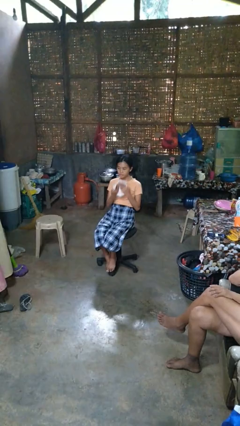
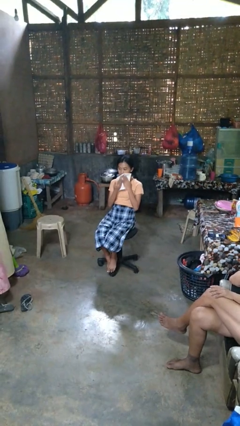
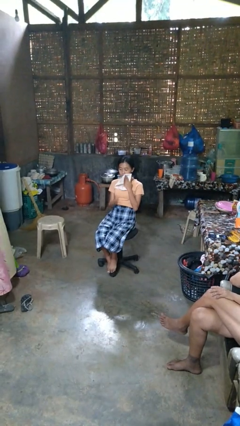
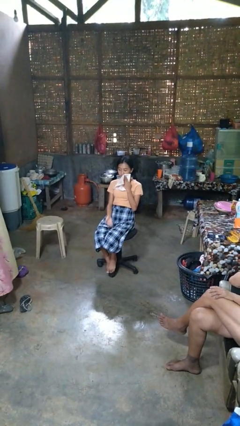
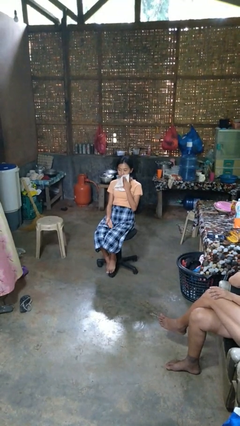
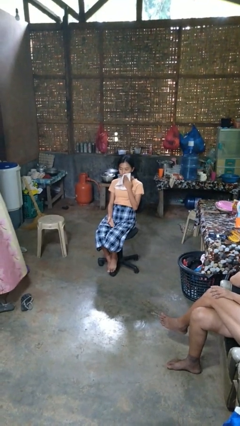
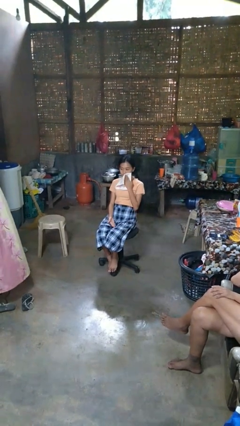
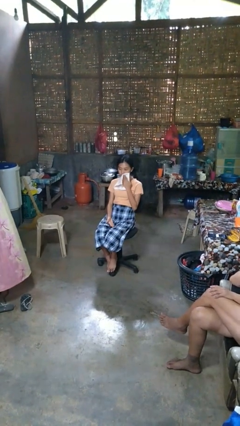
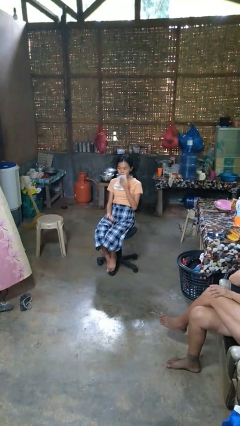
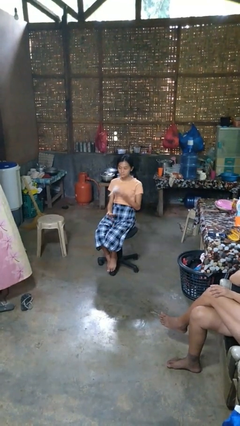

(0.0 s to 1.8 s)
person wipes mouth with napkin

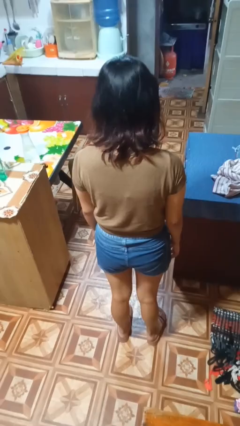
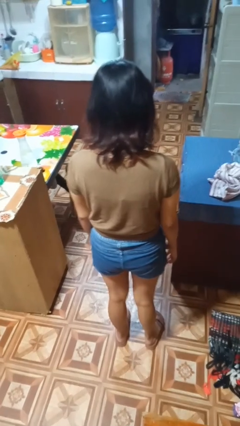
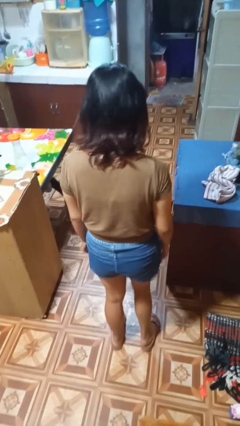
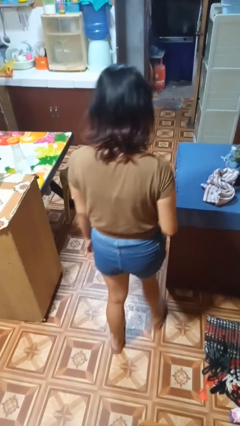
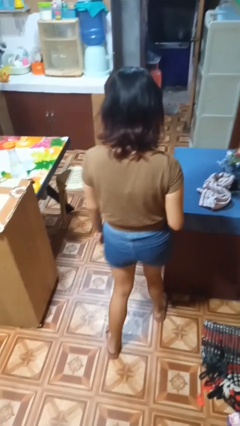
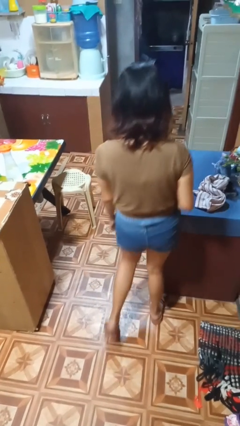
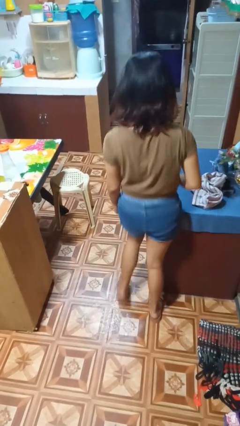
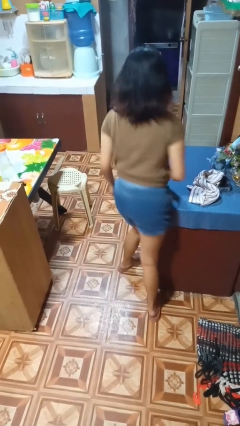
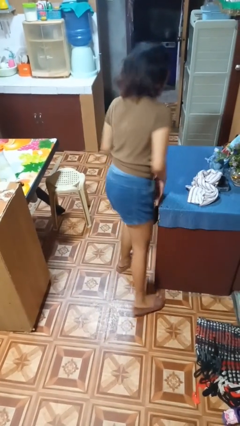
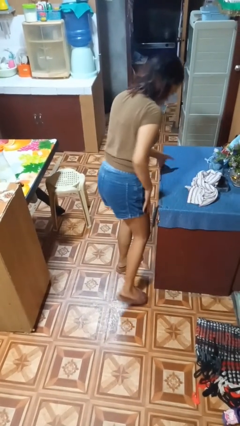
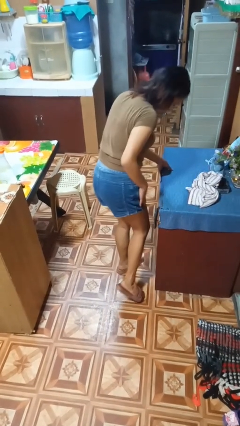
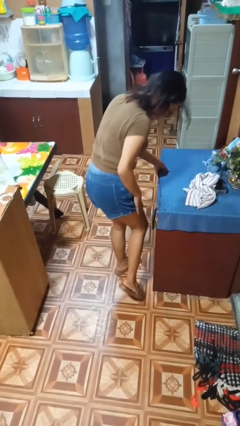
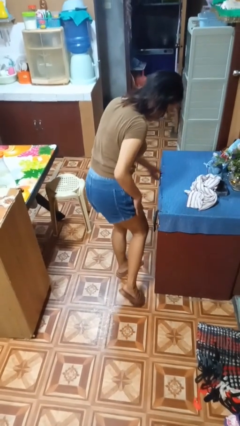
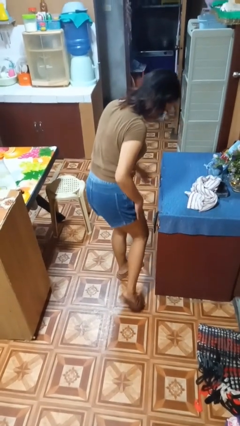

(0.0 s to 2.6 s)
person bumps into table

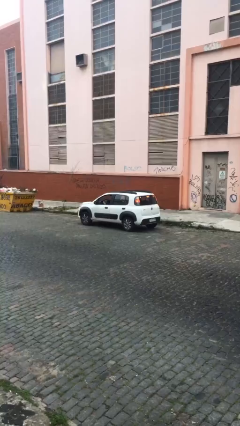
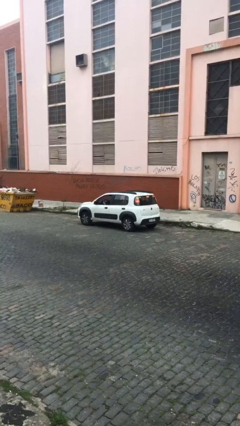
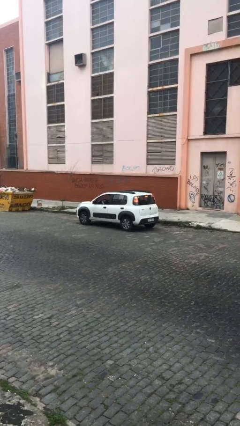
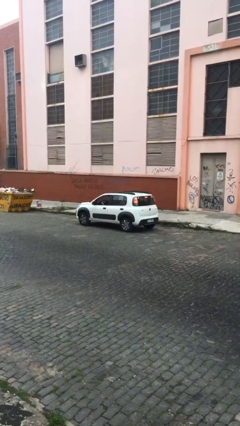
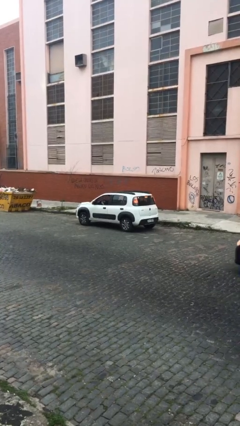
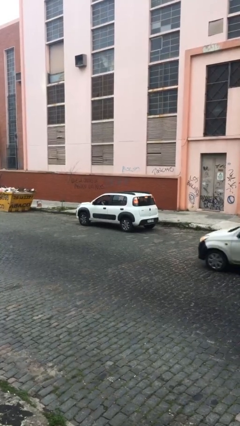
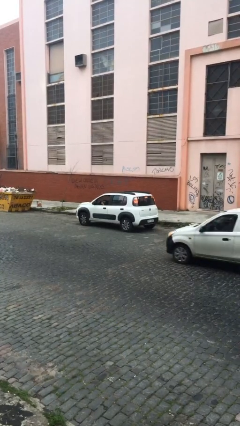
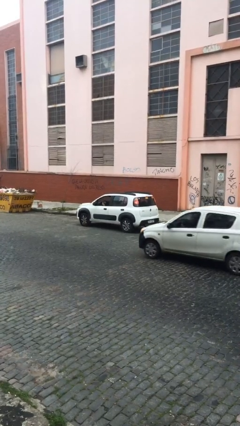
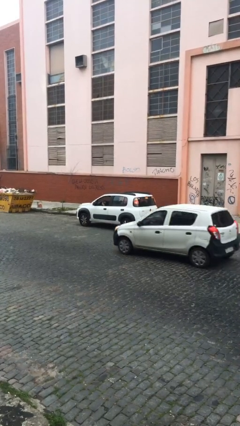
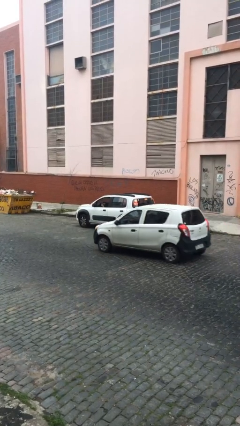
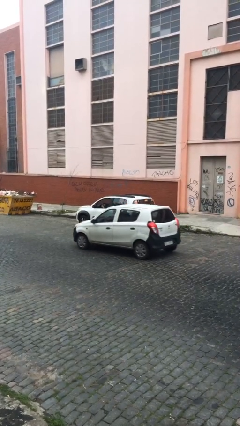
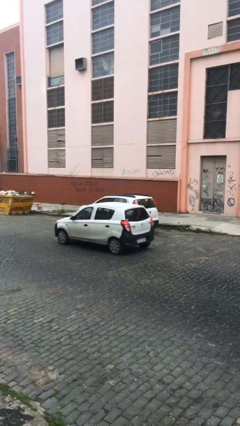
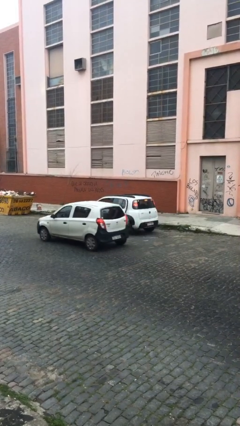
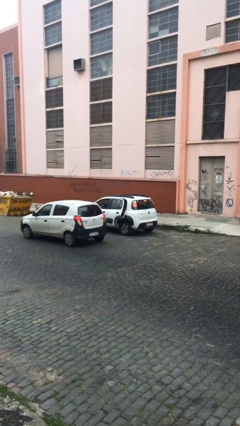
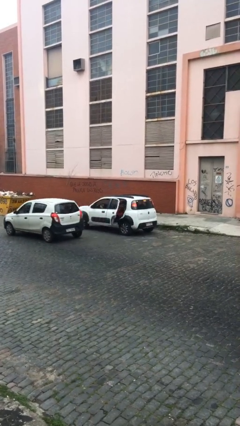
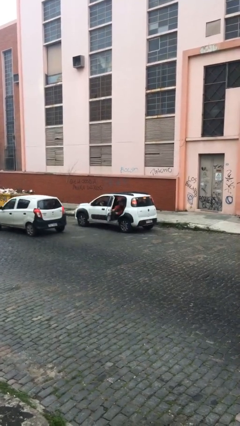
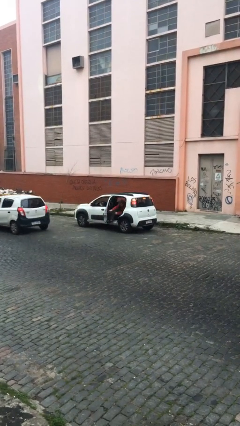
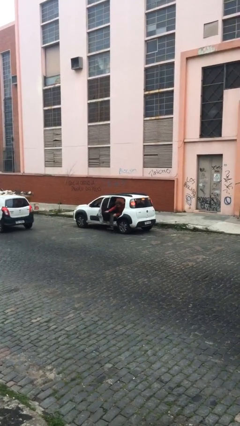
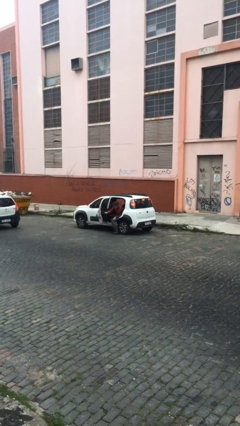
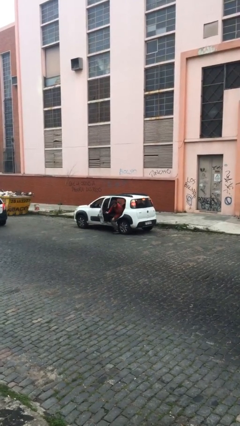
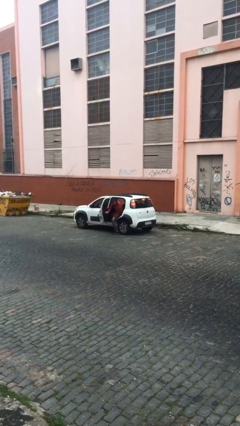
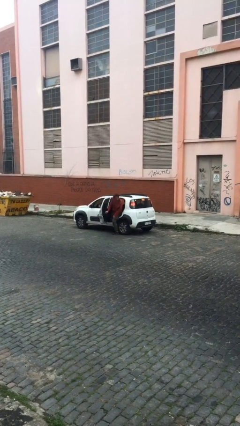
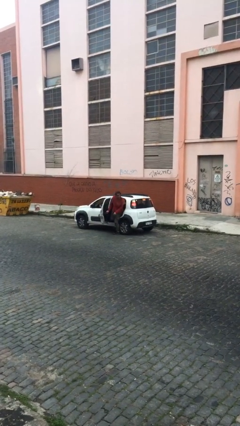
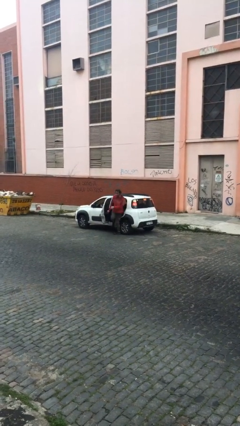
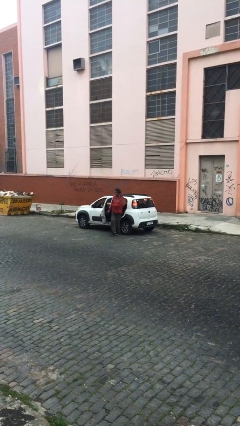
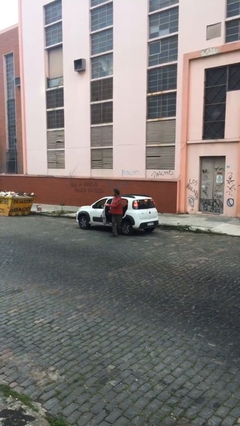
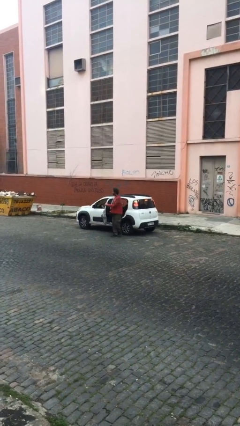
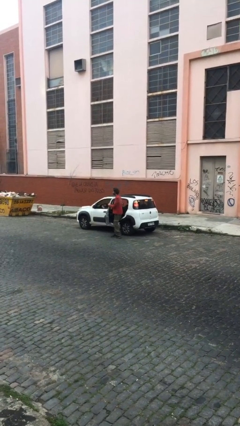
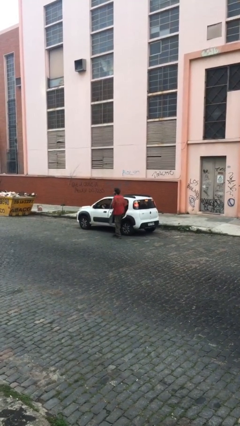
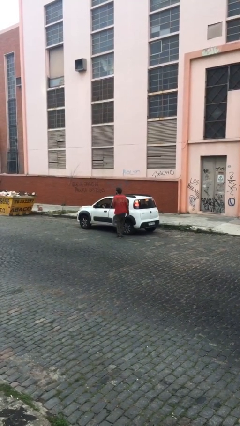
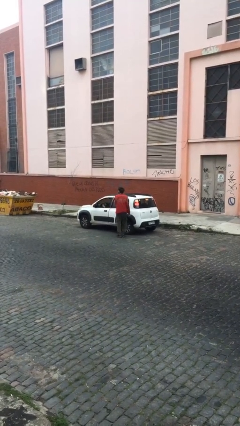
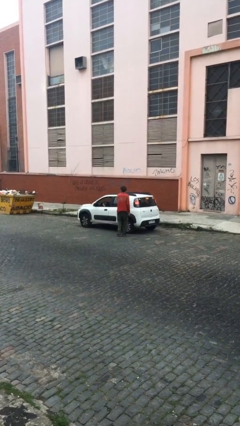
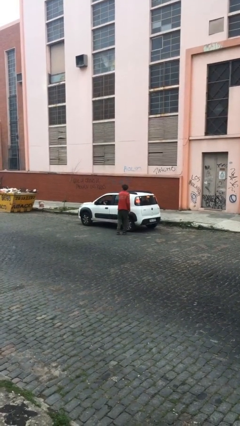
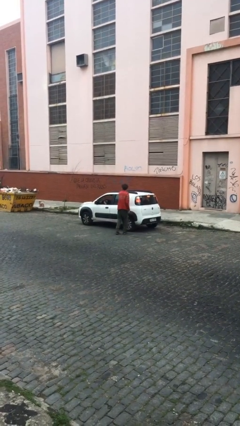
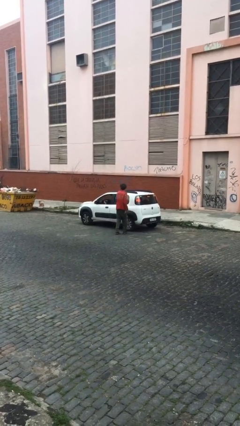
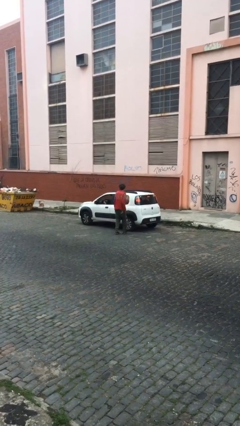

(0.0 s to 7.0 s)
car drops off person

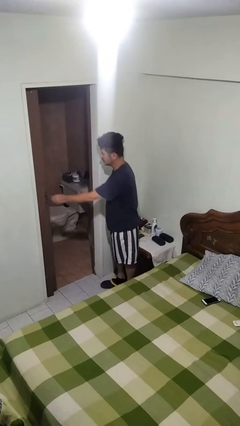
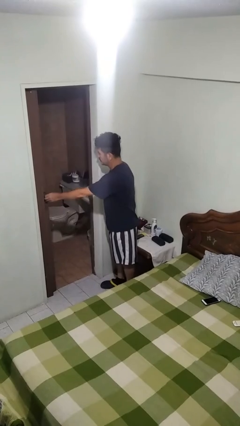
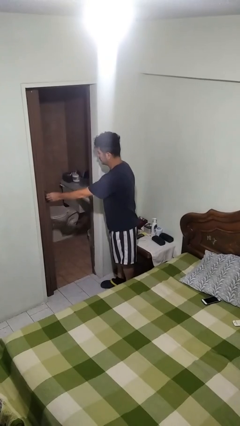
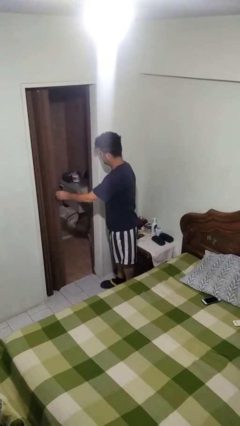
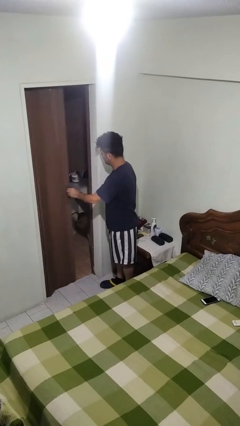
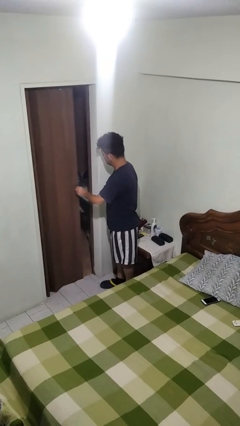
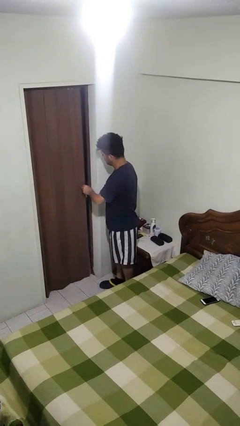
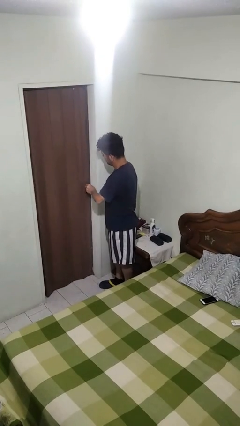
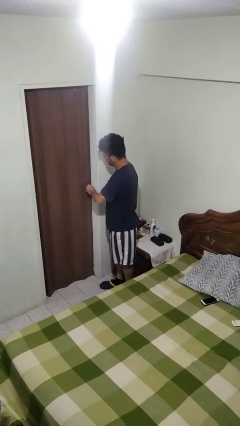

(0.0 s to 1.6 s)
person closes sliding door

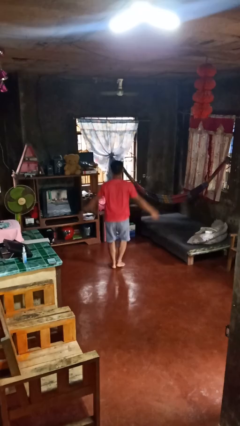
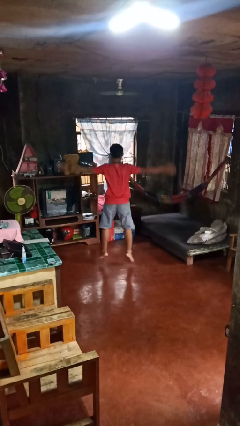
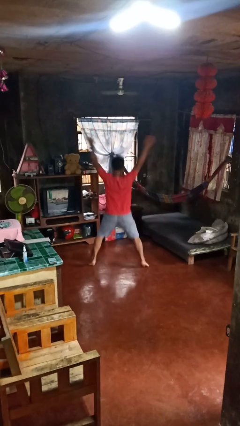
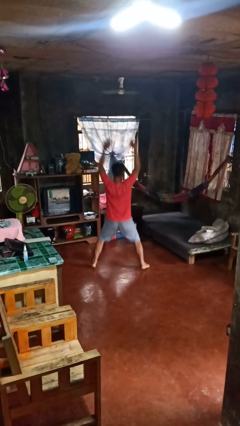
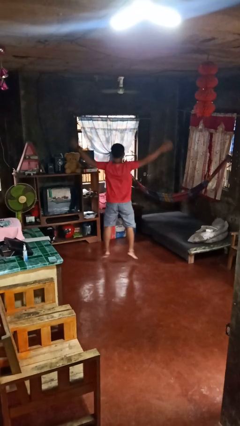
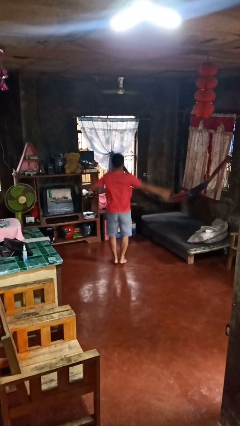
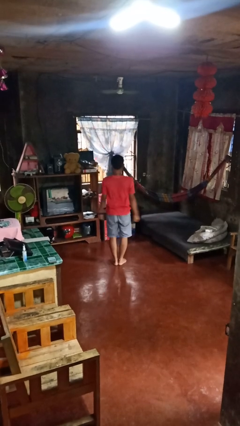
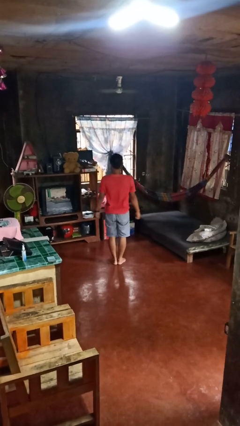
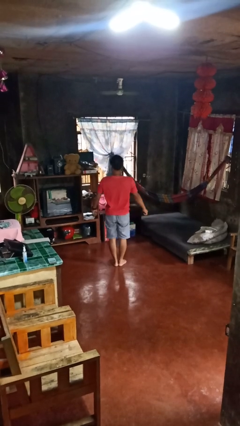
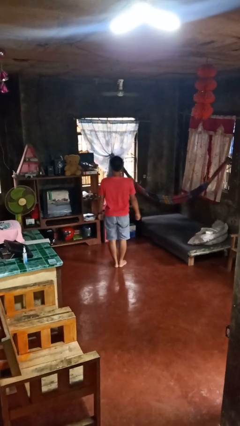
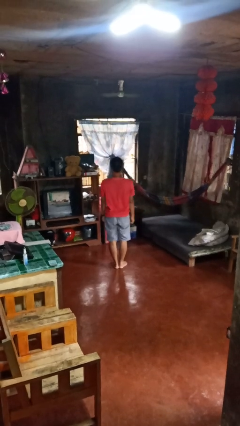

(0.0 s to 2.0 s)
person exercises with jumping jacks

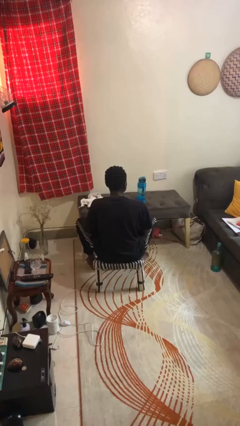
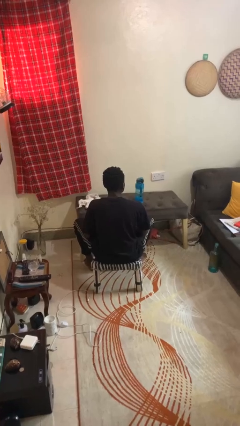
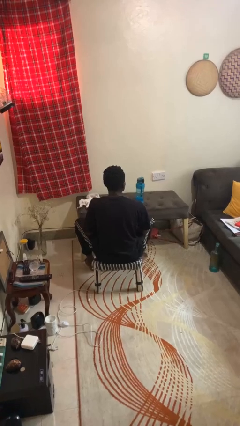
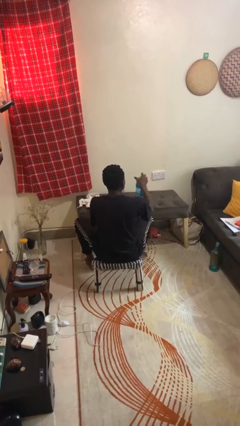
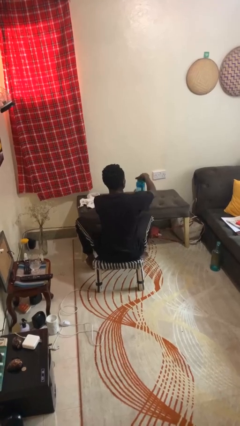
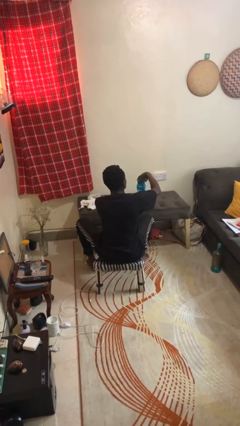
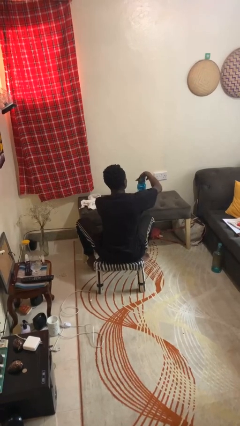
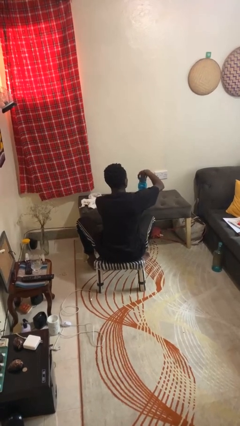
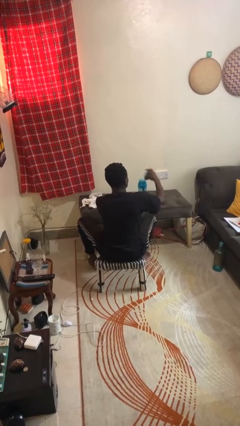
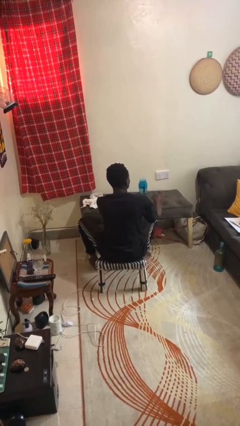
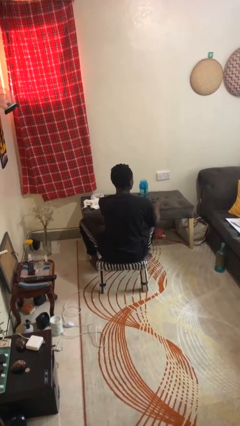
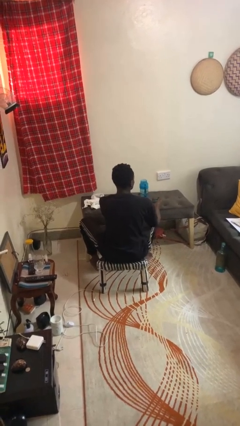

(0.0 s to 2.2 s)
person opens jar
